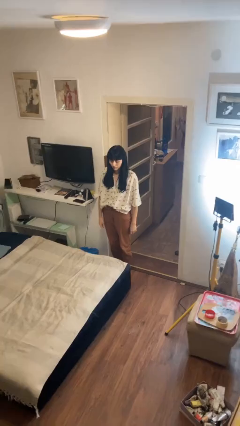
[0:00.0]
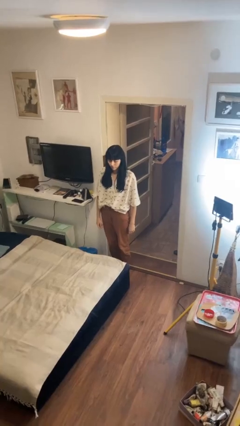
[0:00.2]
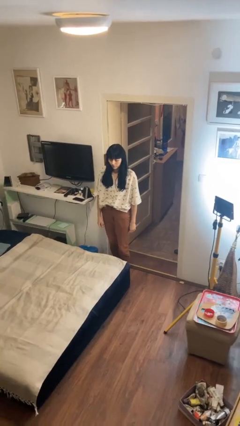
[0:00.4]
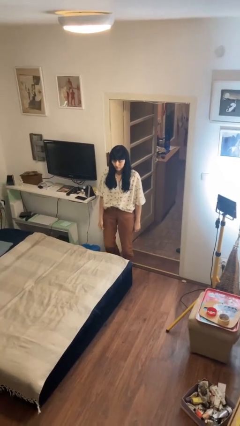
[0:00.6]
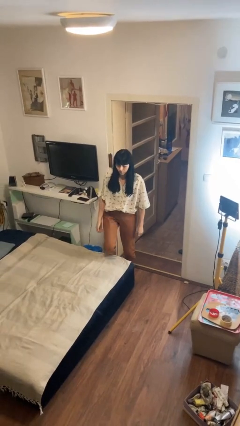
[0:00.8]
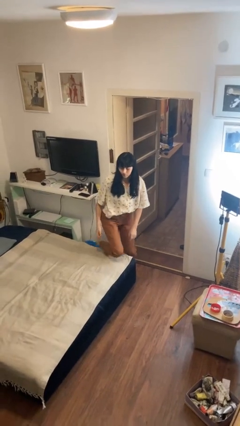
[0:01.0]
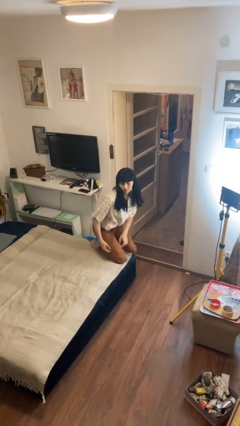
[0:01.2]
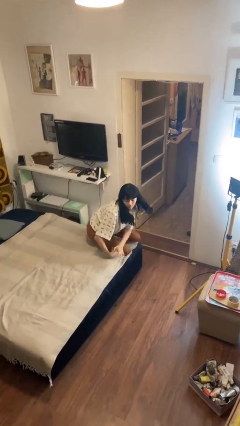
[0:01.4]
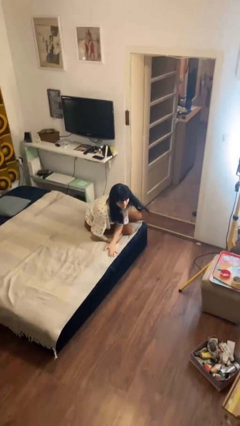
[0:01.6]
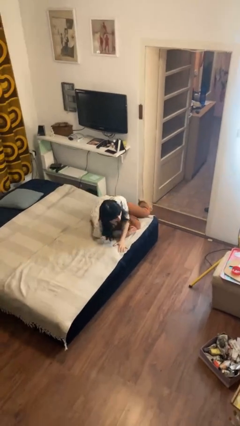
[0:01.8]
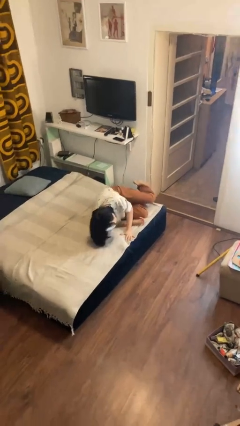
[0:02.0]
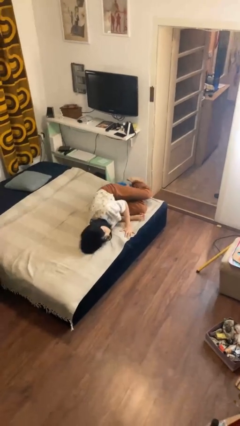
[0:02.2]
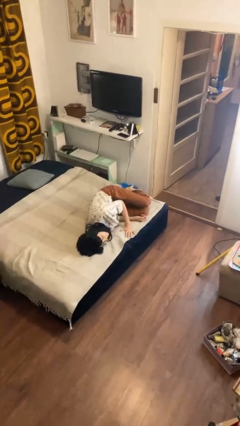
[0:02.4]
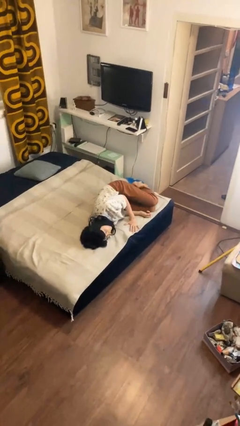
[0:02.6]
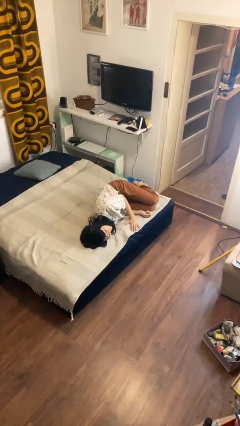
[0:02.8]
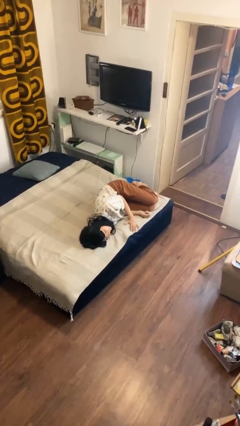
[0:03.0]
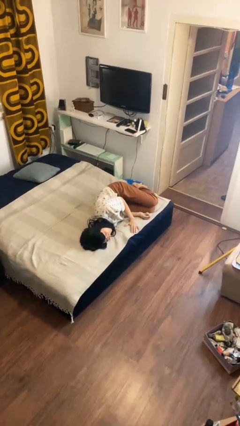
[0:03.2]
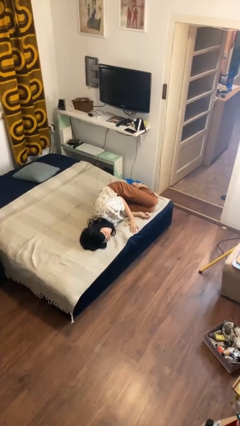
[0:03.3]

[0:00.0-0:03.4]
person lies down on bed

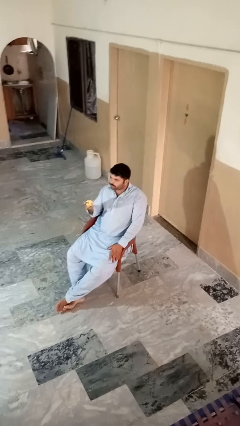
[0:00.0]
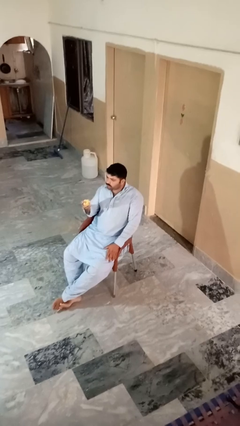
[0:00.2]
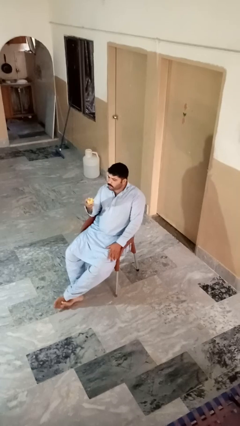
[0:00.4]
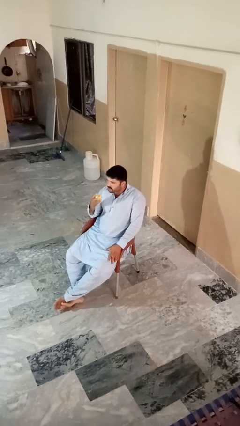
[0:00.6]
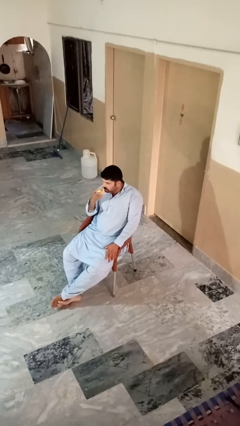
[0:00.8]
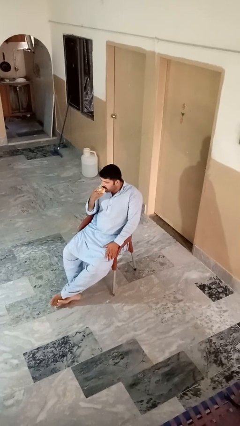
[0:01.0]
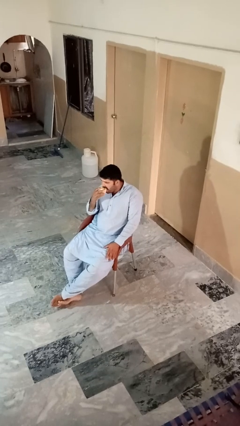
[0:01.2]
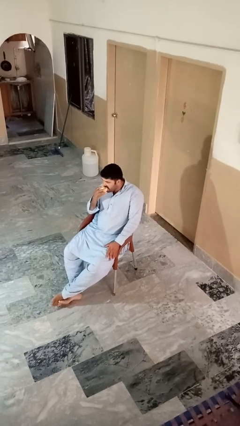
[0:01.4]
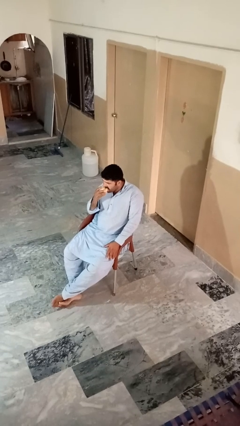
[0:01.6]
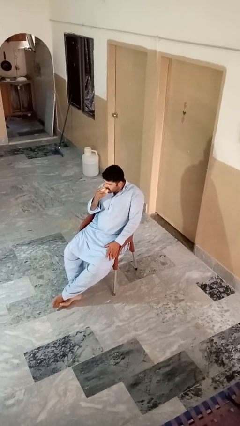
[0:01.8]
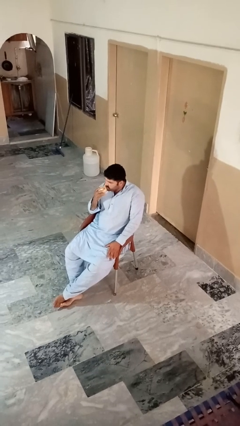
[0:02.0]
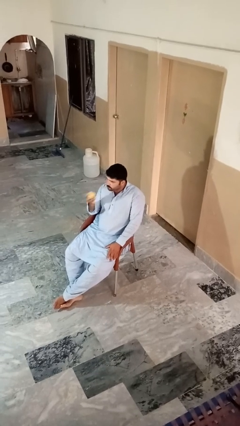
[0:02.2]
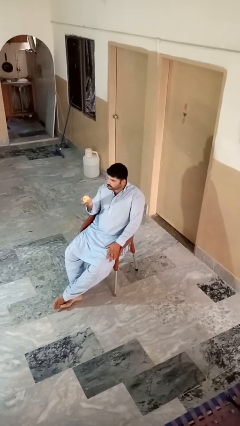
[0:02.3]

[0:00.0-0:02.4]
person eats apple

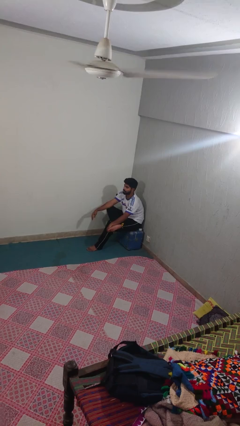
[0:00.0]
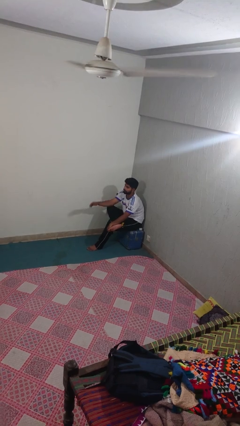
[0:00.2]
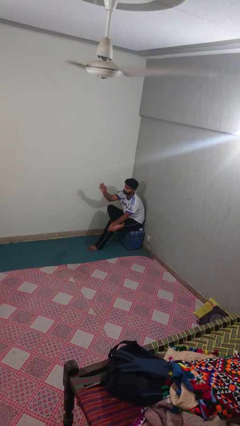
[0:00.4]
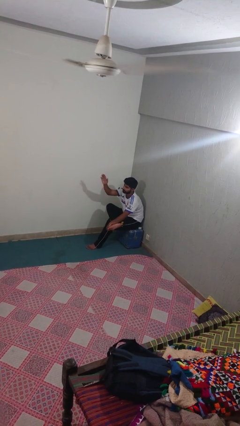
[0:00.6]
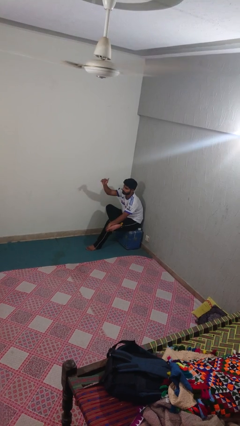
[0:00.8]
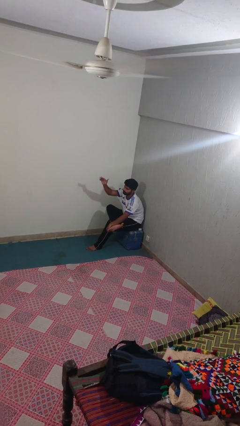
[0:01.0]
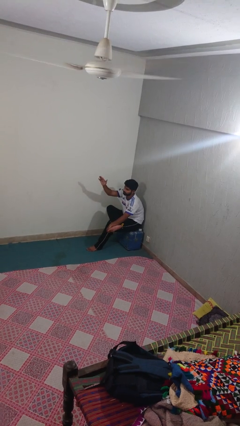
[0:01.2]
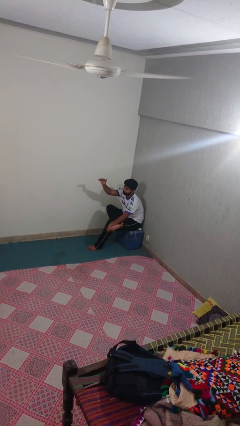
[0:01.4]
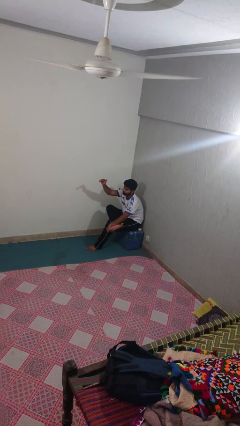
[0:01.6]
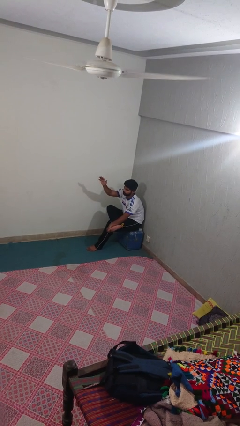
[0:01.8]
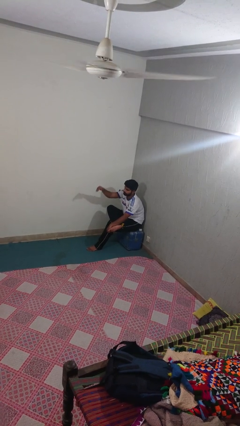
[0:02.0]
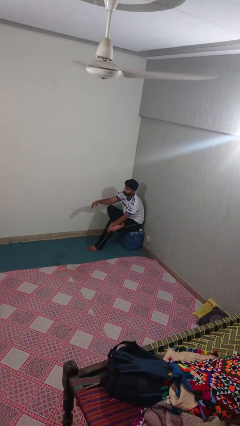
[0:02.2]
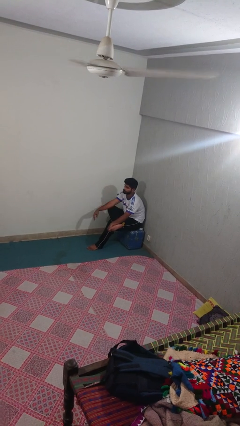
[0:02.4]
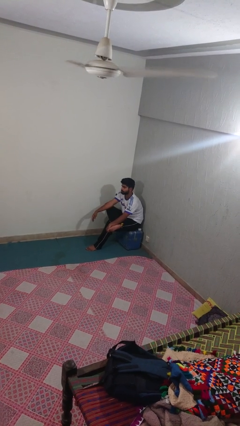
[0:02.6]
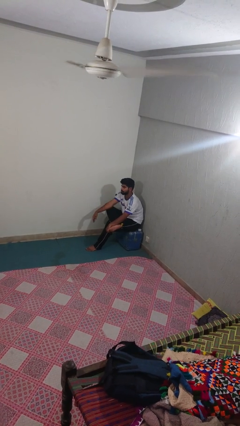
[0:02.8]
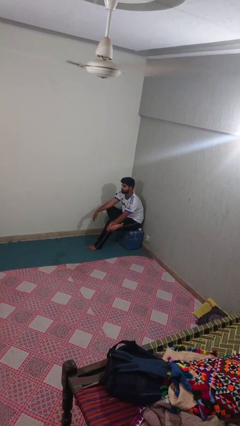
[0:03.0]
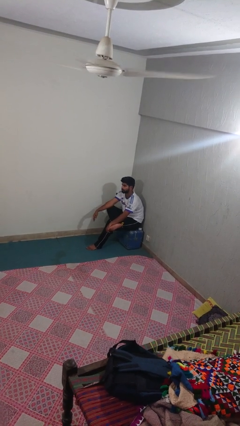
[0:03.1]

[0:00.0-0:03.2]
person gestures come here

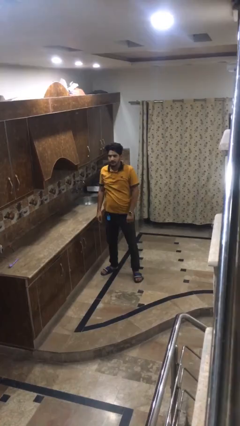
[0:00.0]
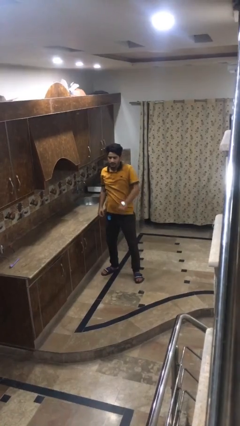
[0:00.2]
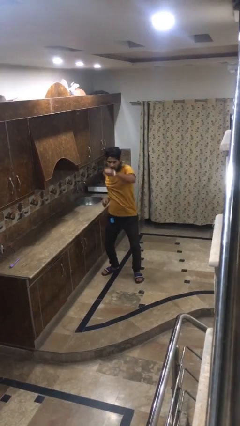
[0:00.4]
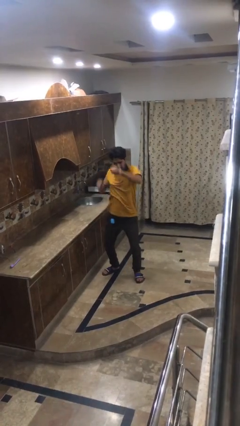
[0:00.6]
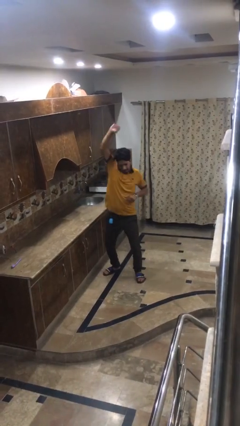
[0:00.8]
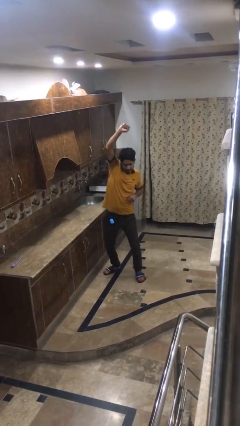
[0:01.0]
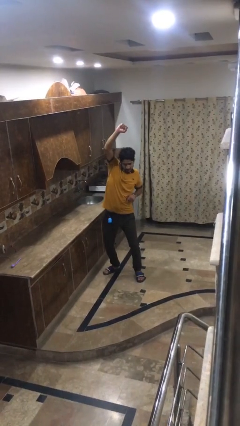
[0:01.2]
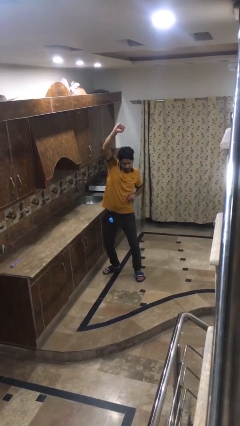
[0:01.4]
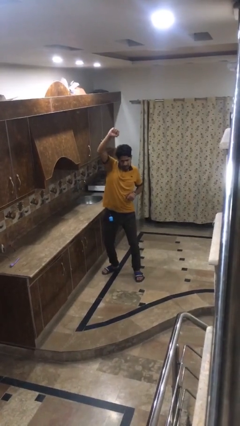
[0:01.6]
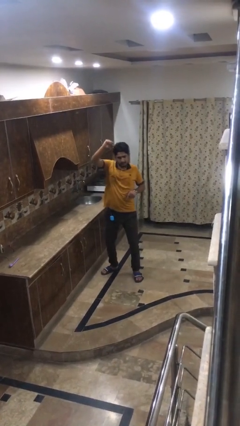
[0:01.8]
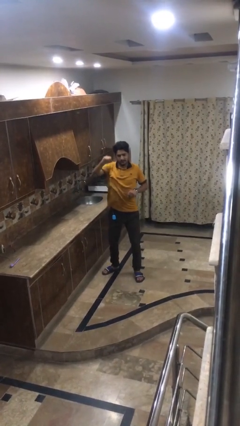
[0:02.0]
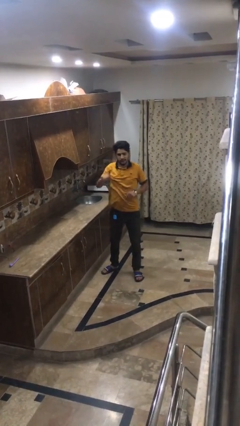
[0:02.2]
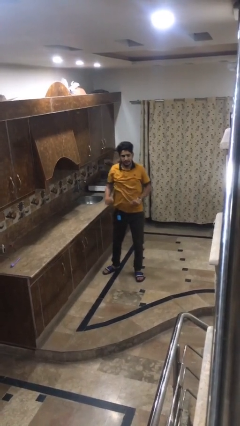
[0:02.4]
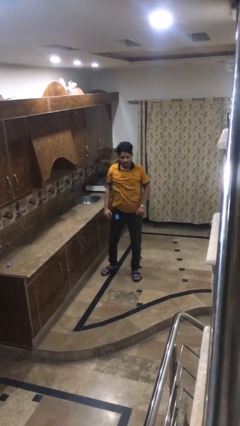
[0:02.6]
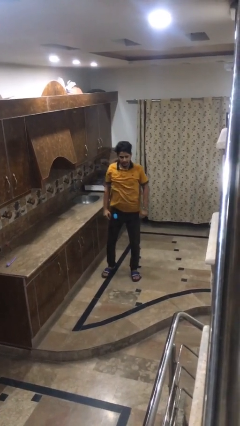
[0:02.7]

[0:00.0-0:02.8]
person punches

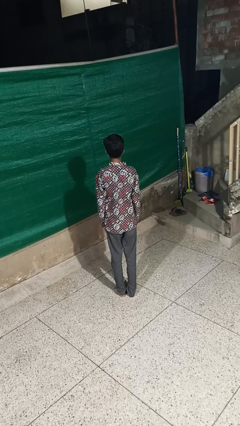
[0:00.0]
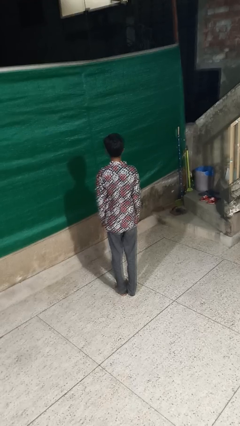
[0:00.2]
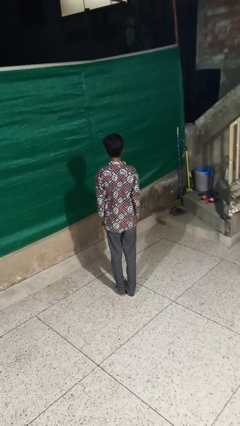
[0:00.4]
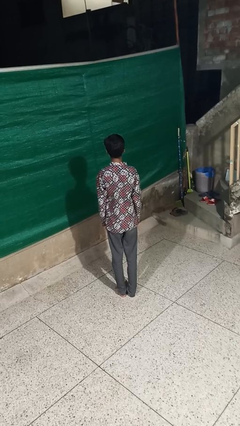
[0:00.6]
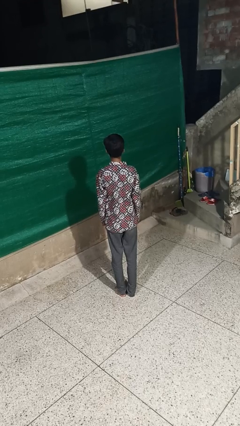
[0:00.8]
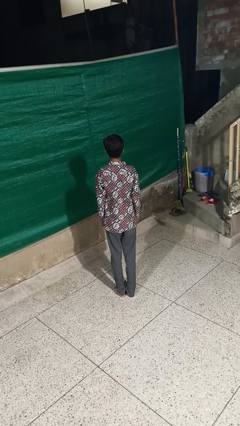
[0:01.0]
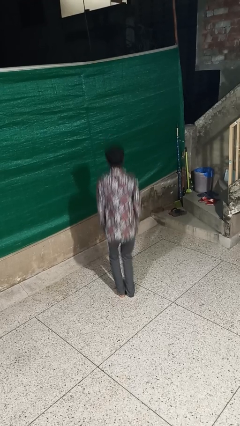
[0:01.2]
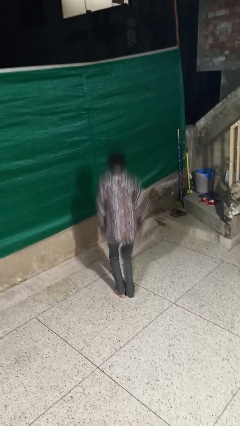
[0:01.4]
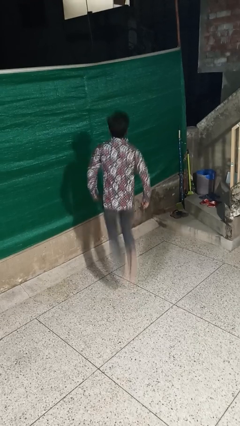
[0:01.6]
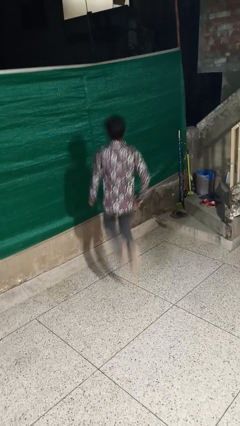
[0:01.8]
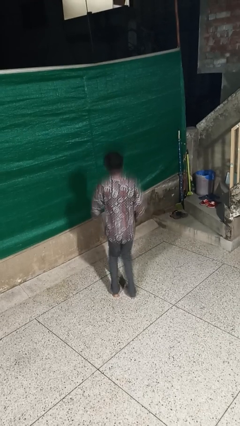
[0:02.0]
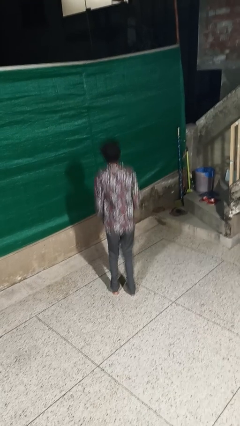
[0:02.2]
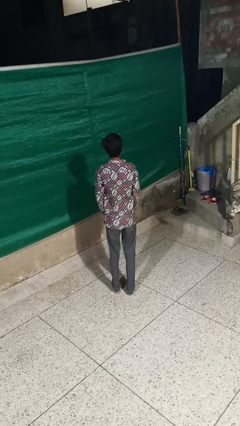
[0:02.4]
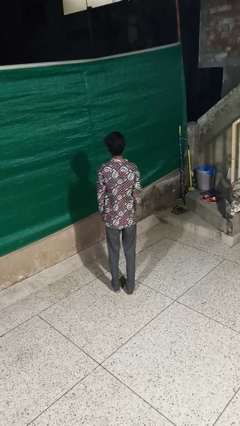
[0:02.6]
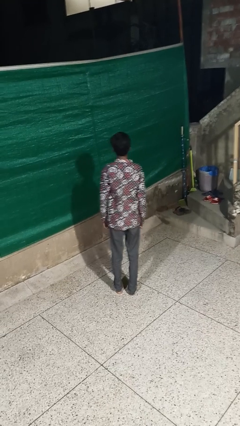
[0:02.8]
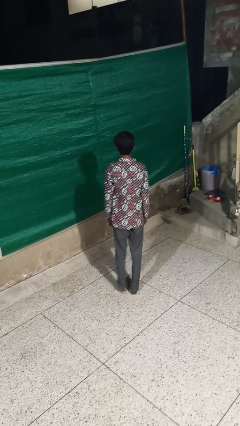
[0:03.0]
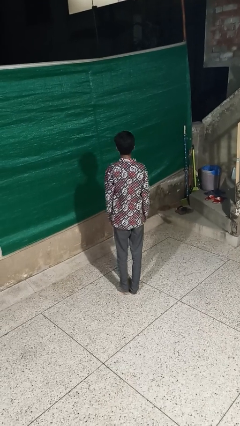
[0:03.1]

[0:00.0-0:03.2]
person jumps

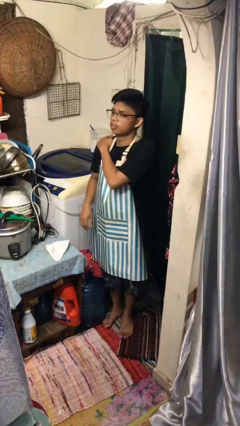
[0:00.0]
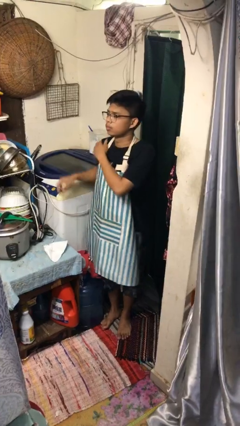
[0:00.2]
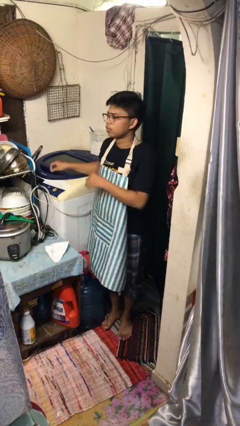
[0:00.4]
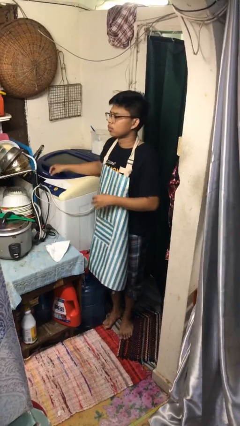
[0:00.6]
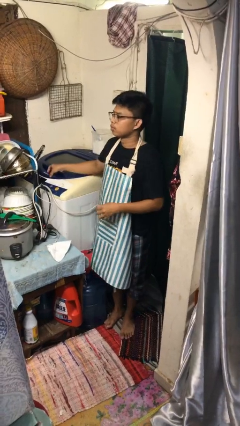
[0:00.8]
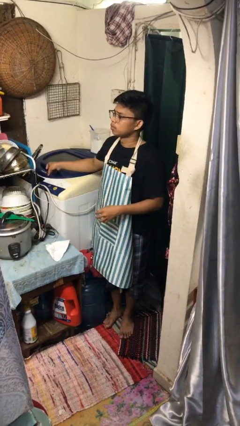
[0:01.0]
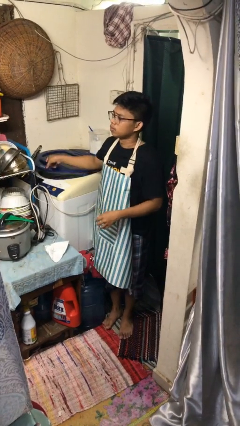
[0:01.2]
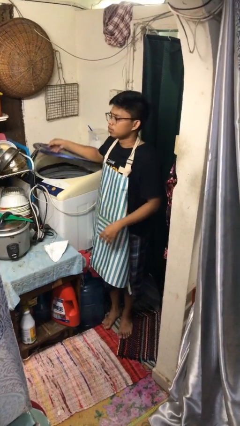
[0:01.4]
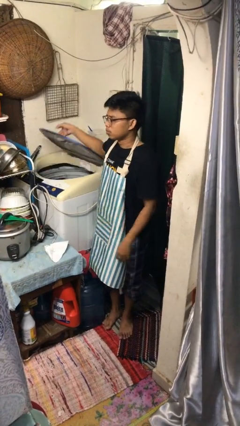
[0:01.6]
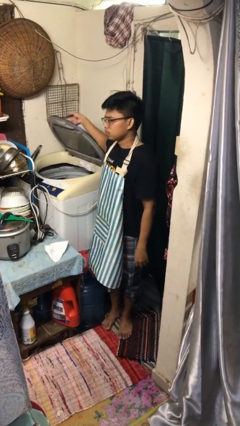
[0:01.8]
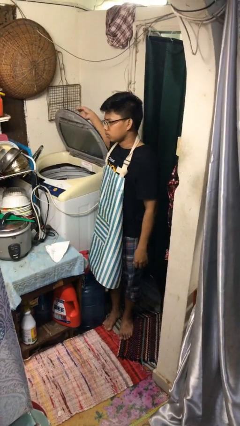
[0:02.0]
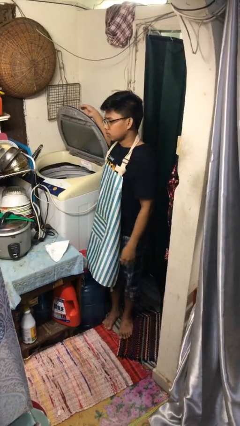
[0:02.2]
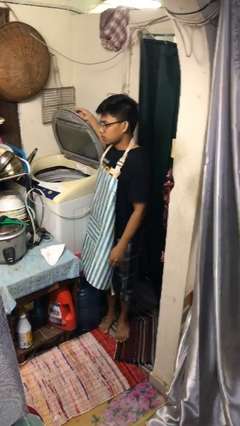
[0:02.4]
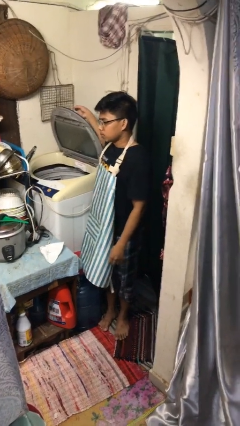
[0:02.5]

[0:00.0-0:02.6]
person opens clothes washer
